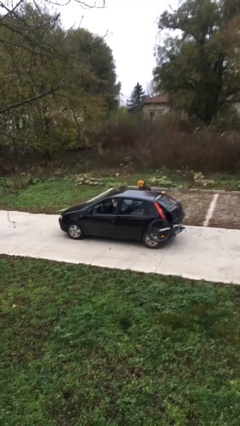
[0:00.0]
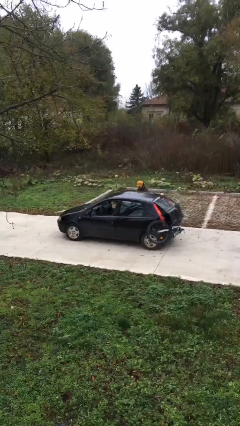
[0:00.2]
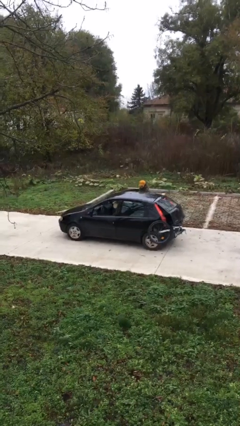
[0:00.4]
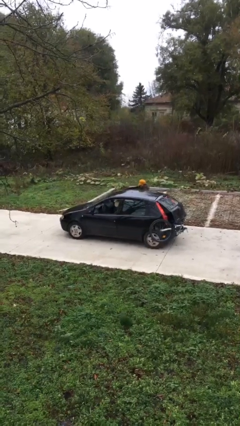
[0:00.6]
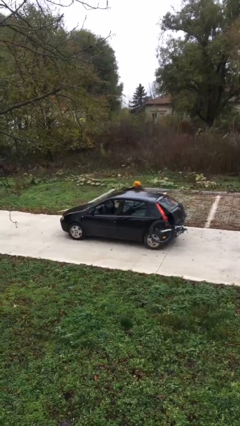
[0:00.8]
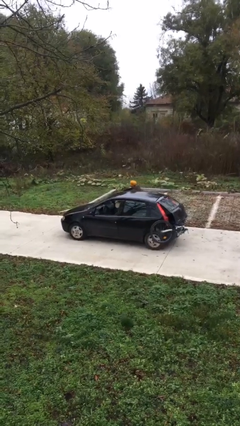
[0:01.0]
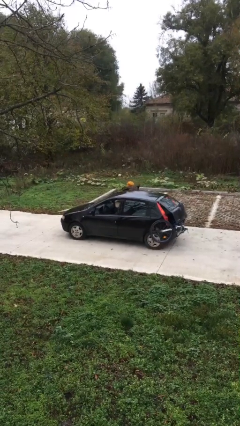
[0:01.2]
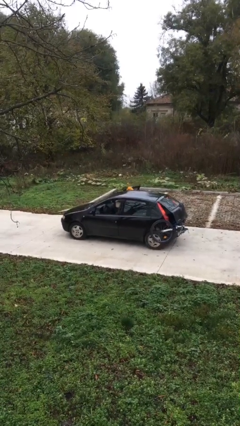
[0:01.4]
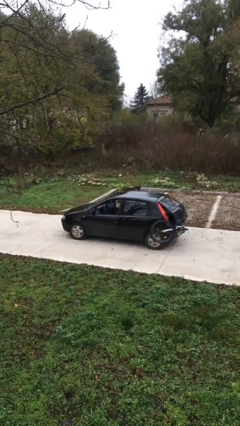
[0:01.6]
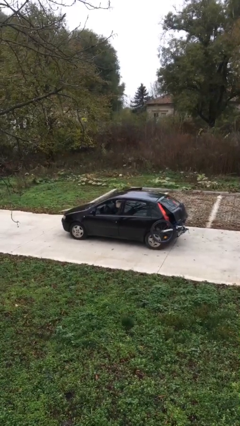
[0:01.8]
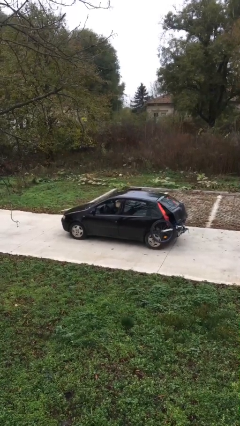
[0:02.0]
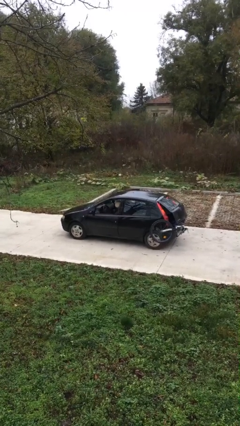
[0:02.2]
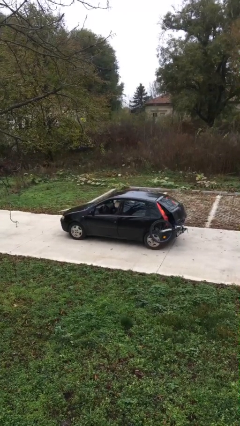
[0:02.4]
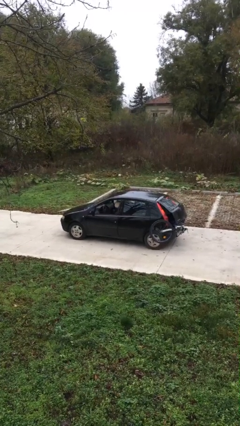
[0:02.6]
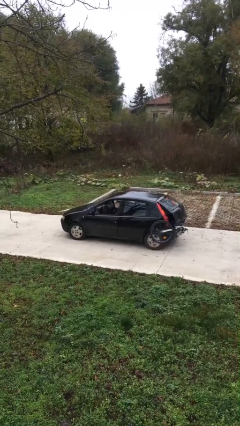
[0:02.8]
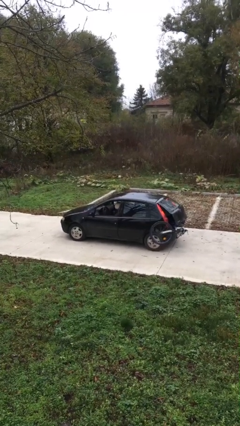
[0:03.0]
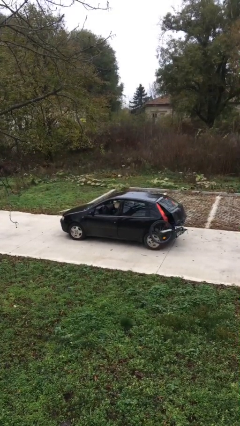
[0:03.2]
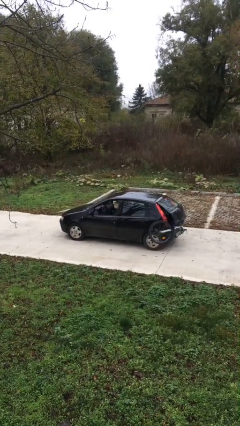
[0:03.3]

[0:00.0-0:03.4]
car picks up person

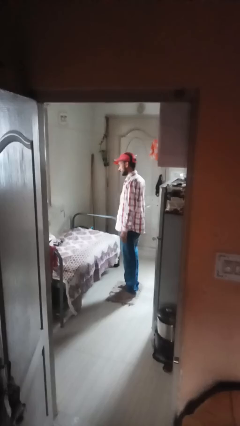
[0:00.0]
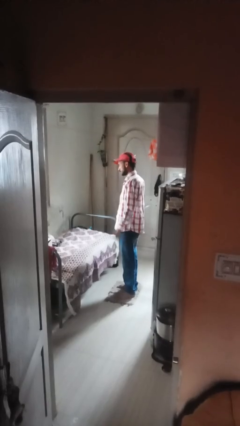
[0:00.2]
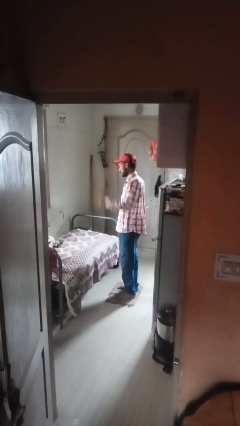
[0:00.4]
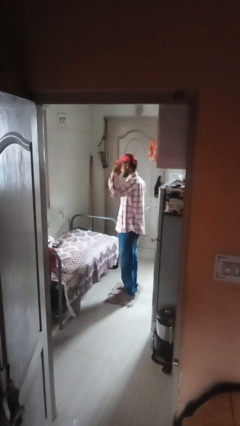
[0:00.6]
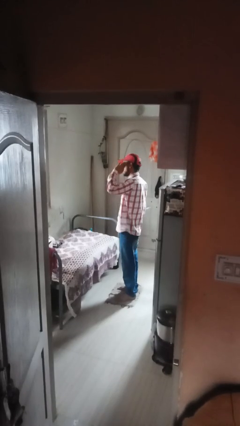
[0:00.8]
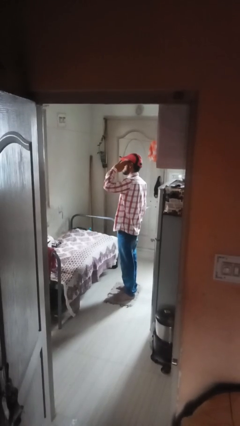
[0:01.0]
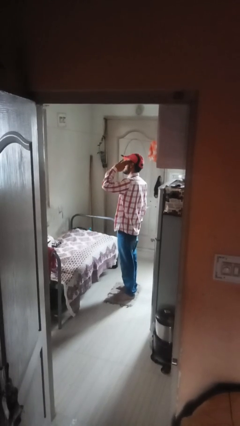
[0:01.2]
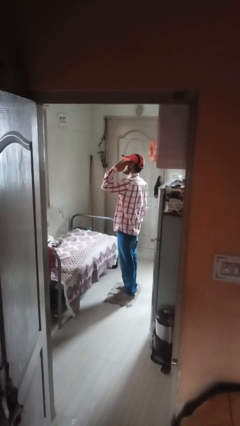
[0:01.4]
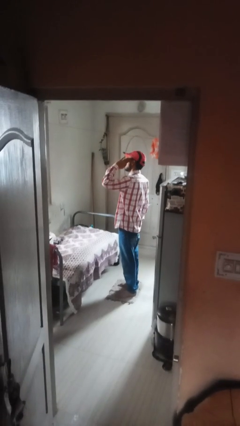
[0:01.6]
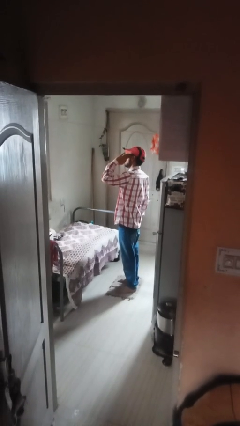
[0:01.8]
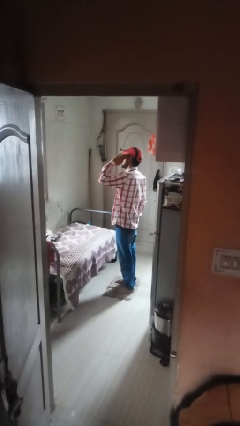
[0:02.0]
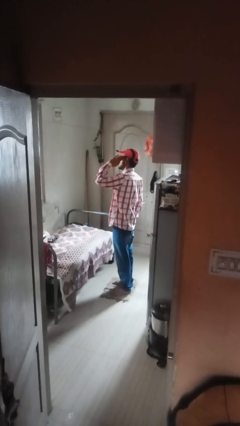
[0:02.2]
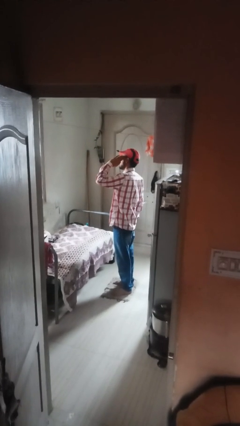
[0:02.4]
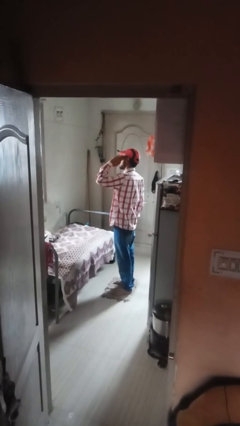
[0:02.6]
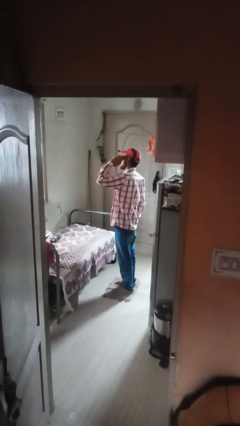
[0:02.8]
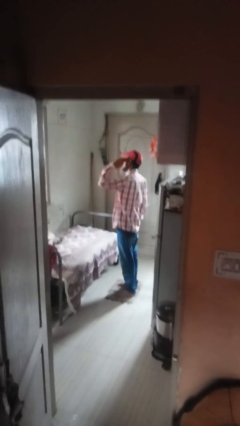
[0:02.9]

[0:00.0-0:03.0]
person salutes

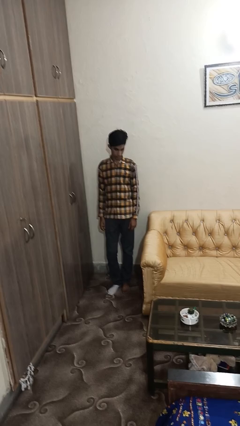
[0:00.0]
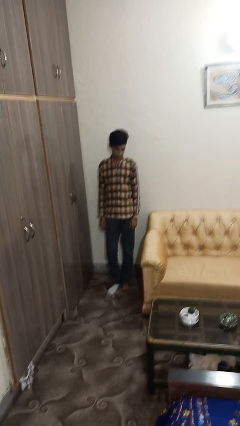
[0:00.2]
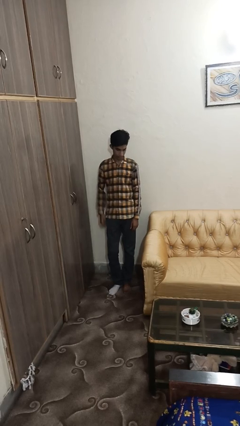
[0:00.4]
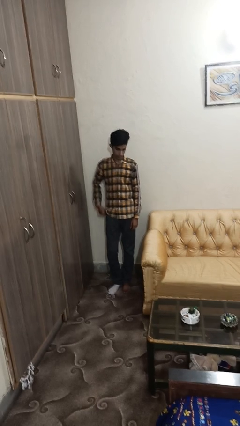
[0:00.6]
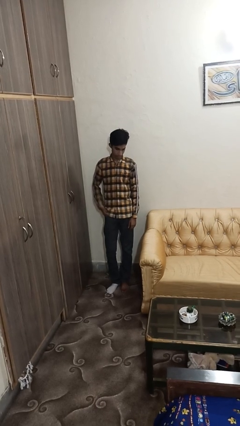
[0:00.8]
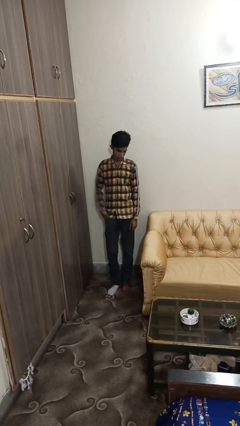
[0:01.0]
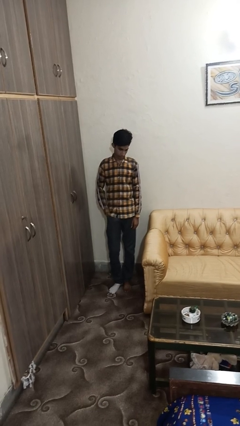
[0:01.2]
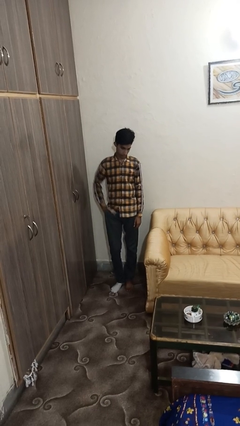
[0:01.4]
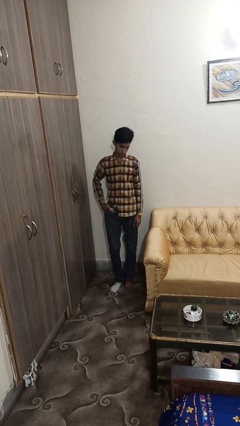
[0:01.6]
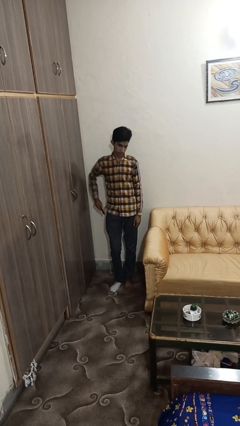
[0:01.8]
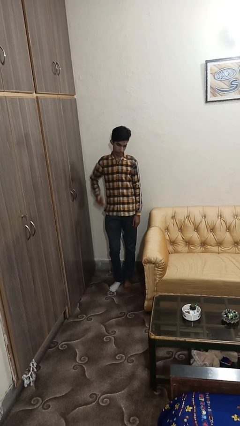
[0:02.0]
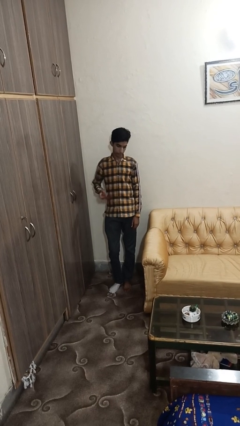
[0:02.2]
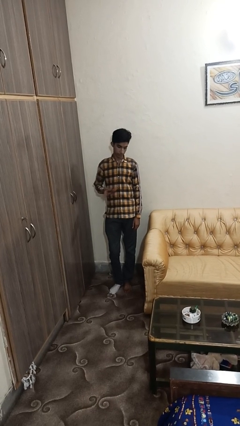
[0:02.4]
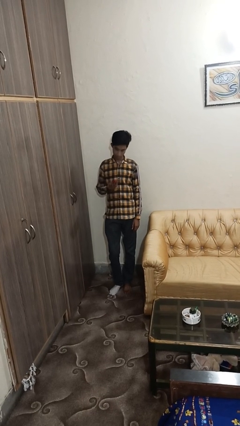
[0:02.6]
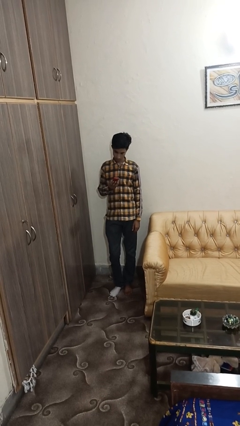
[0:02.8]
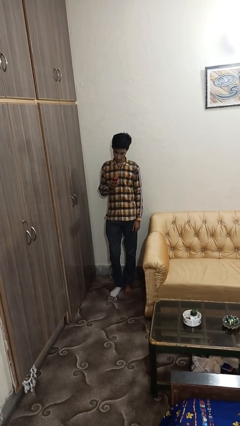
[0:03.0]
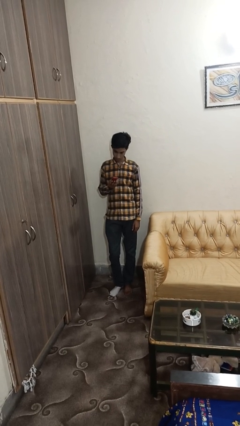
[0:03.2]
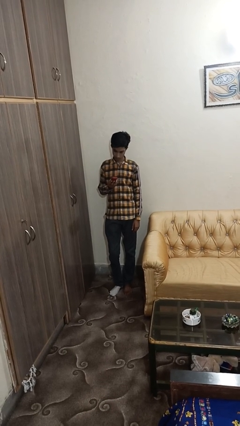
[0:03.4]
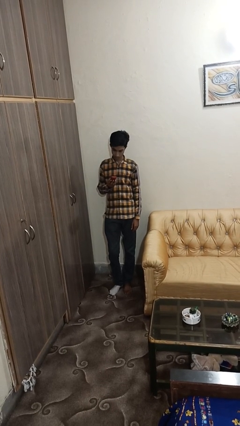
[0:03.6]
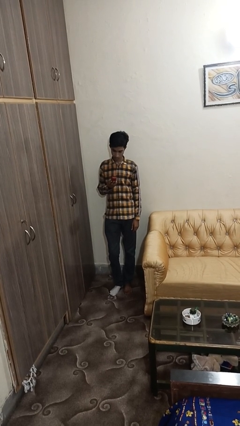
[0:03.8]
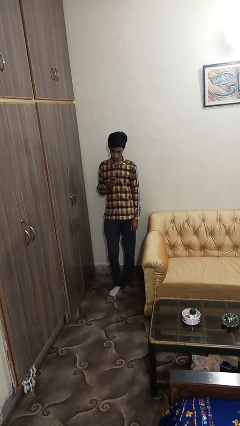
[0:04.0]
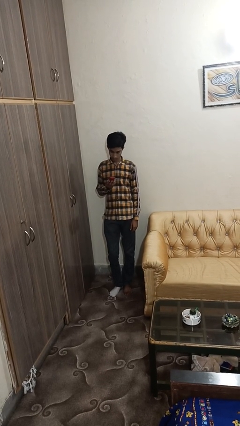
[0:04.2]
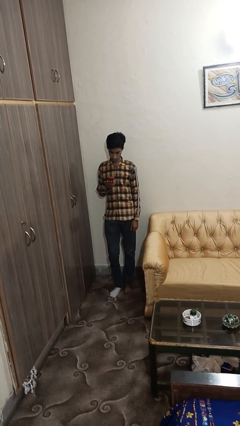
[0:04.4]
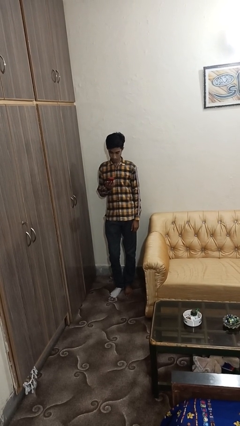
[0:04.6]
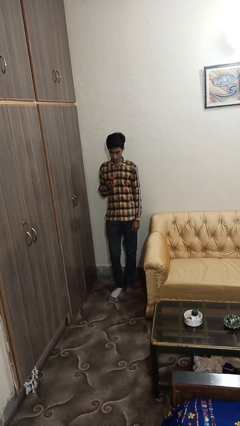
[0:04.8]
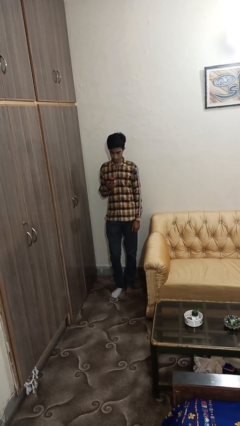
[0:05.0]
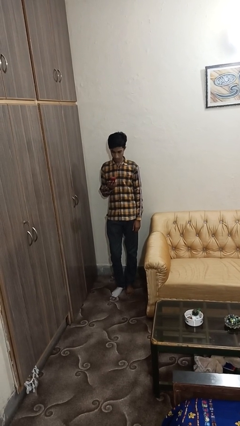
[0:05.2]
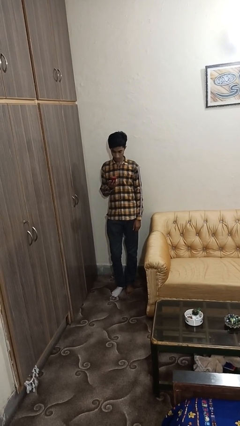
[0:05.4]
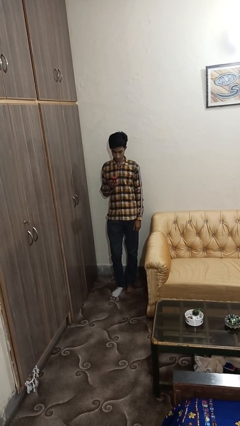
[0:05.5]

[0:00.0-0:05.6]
person takes phone from pocket

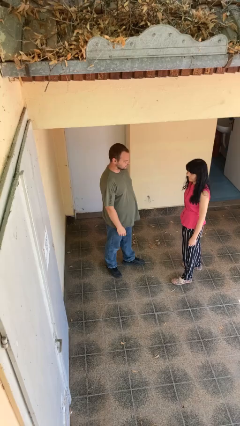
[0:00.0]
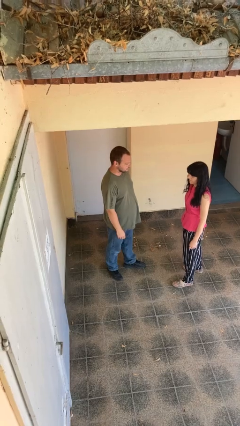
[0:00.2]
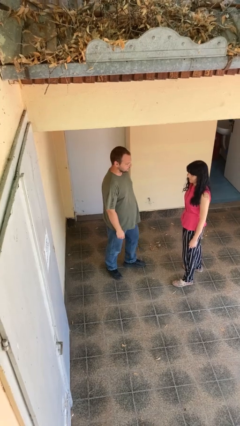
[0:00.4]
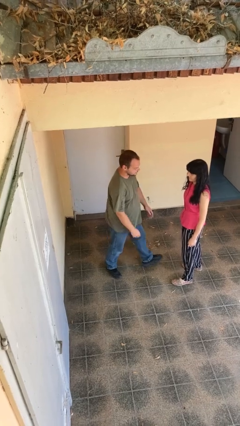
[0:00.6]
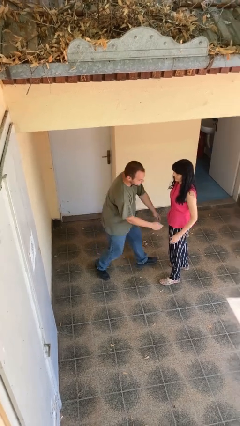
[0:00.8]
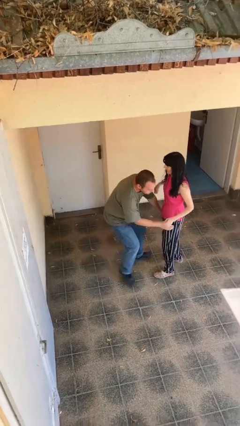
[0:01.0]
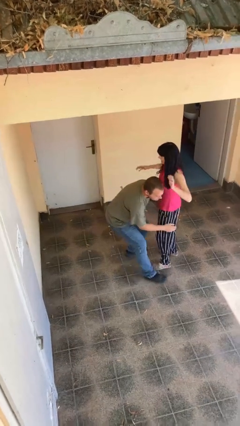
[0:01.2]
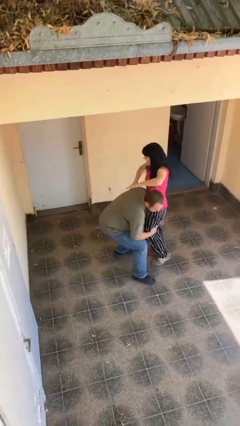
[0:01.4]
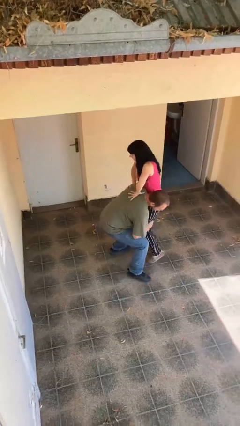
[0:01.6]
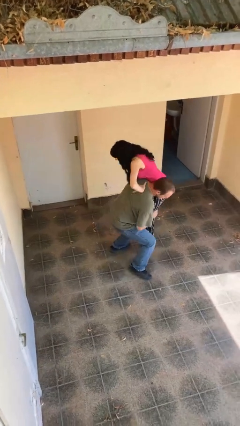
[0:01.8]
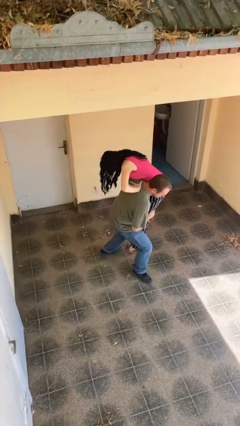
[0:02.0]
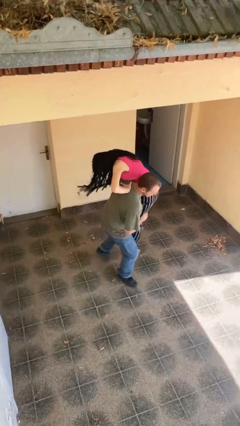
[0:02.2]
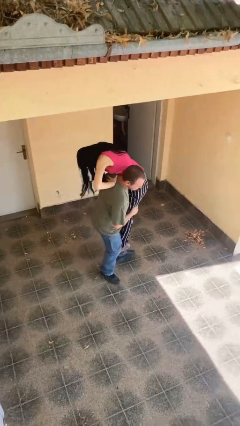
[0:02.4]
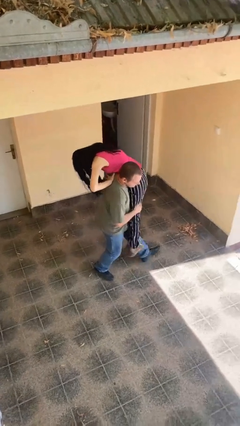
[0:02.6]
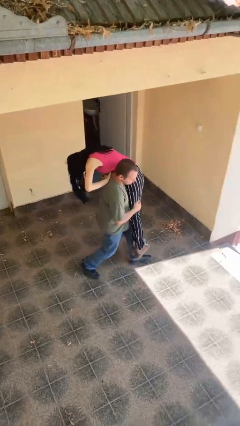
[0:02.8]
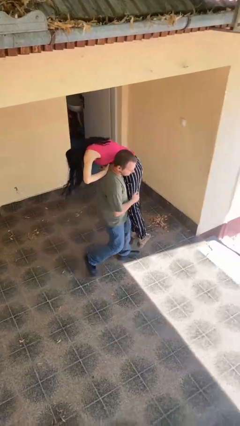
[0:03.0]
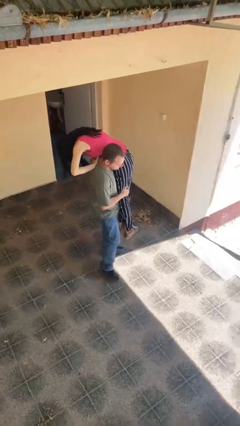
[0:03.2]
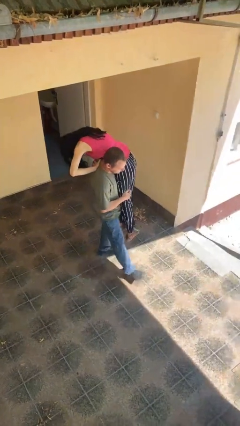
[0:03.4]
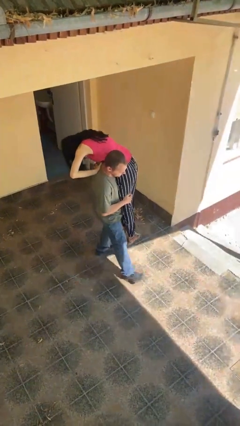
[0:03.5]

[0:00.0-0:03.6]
person carries person over shoulder

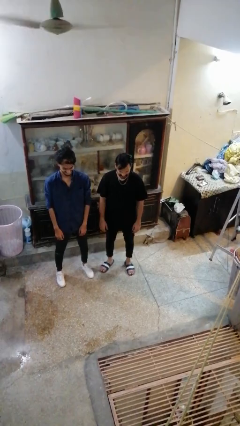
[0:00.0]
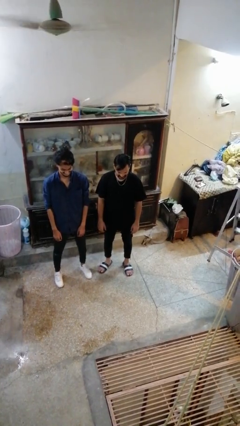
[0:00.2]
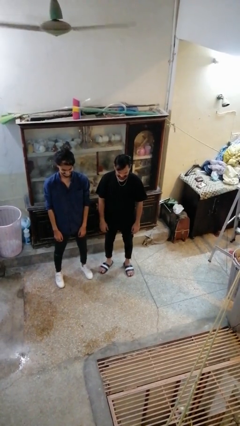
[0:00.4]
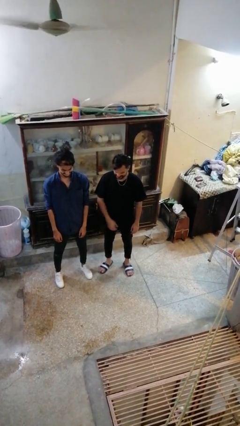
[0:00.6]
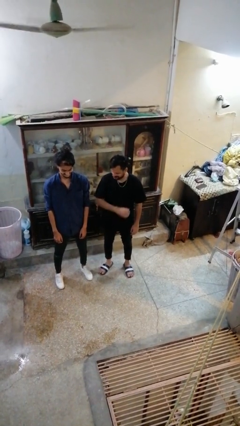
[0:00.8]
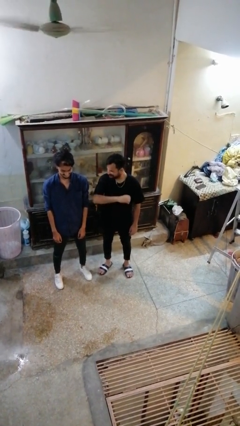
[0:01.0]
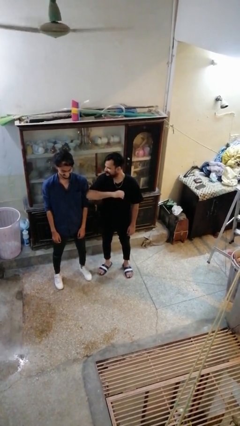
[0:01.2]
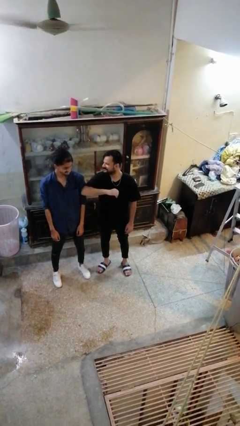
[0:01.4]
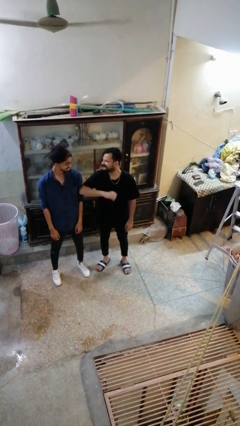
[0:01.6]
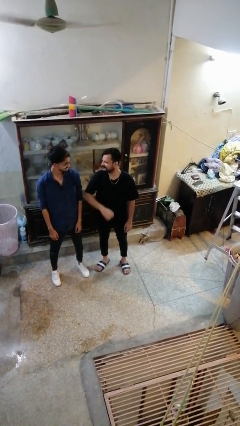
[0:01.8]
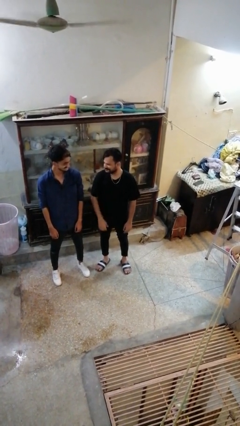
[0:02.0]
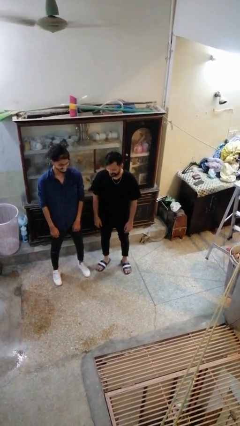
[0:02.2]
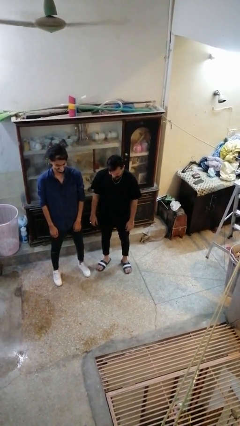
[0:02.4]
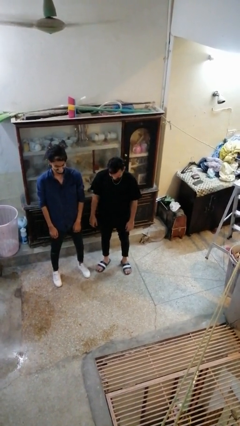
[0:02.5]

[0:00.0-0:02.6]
person nudges person with elbow
